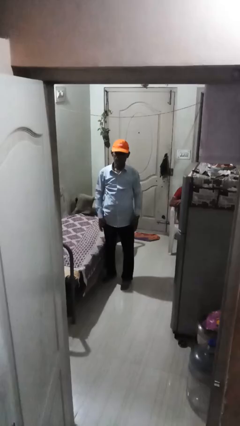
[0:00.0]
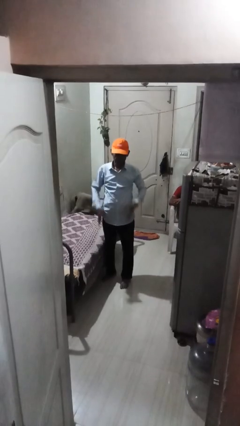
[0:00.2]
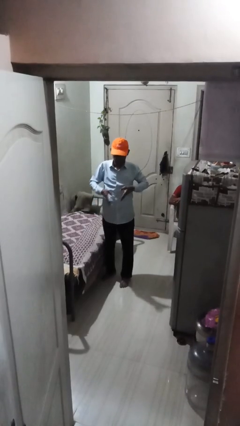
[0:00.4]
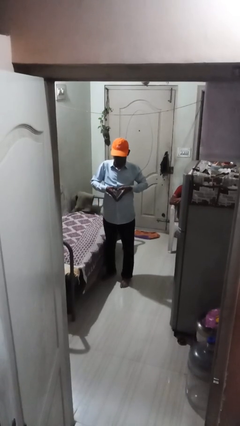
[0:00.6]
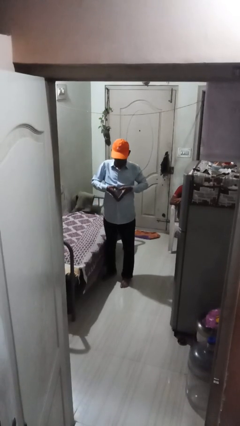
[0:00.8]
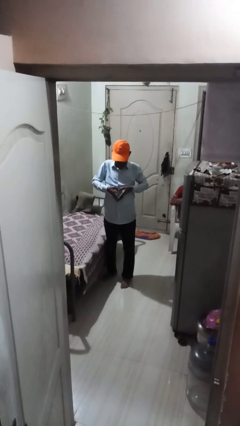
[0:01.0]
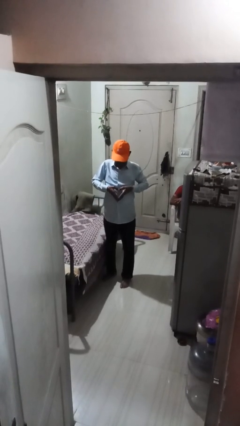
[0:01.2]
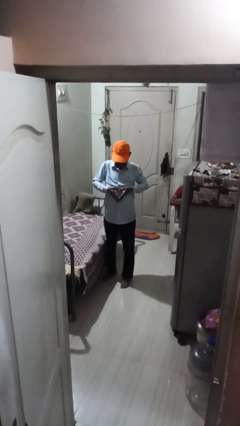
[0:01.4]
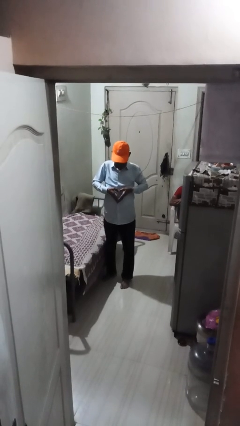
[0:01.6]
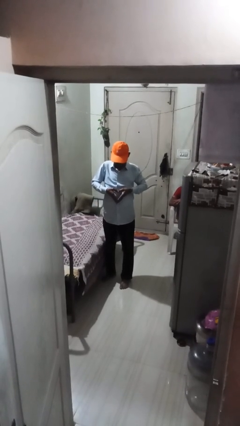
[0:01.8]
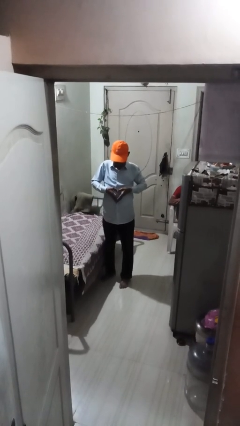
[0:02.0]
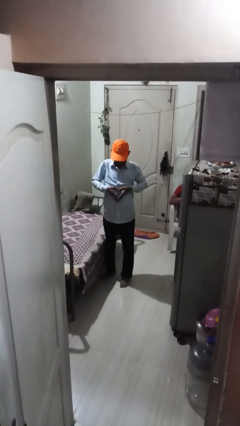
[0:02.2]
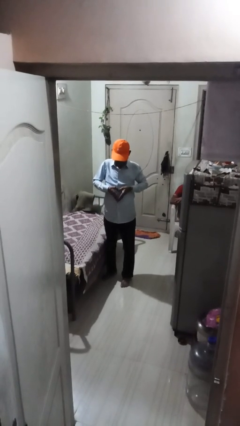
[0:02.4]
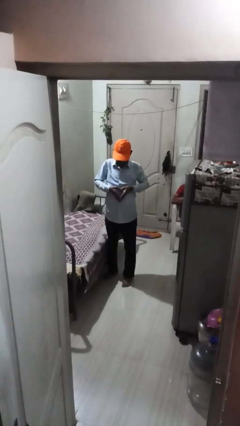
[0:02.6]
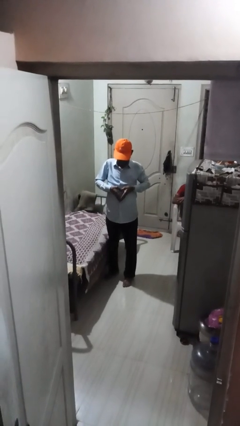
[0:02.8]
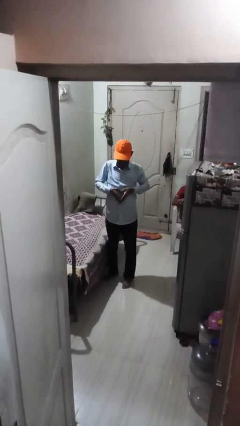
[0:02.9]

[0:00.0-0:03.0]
person gestures heart

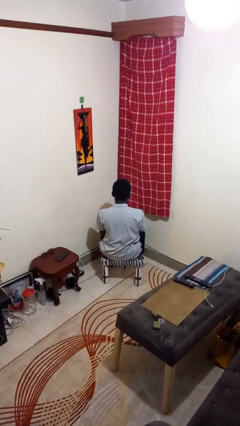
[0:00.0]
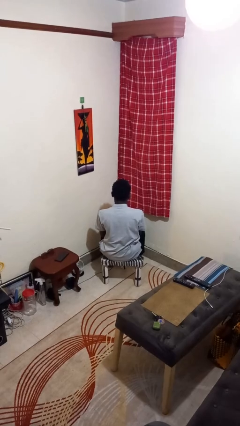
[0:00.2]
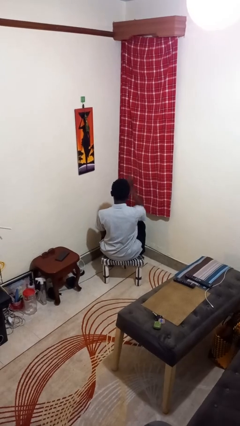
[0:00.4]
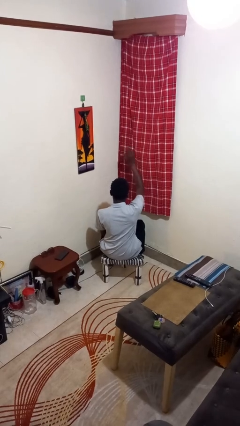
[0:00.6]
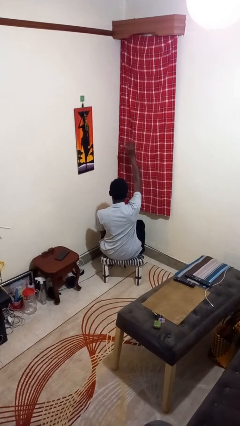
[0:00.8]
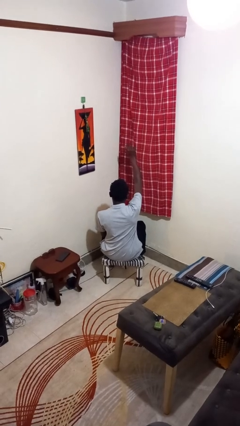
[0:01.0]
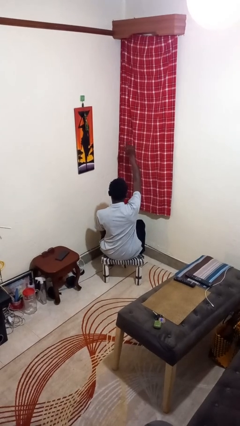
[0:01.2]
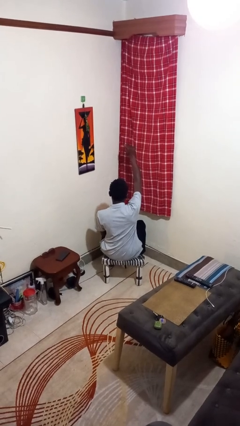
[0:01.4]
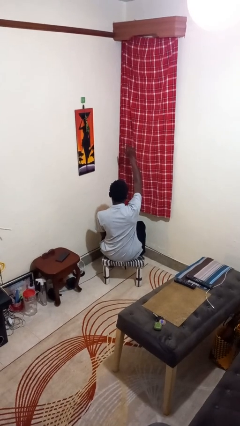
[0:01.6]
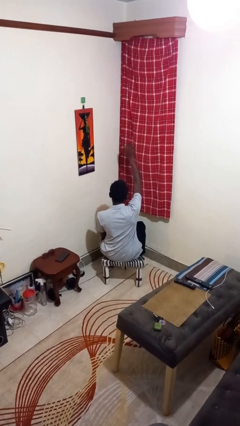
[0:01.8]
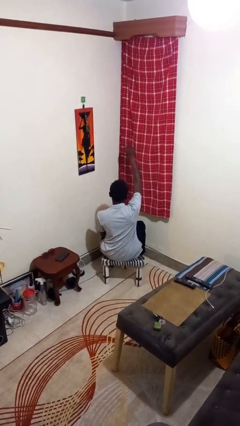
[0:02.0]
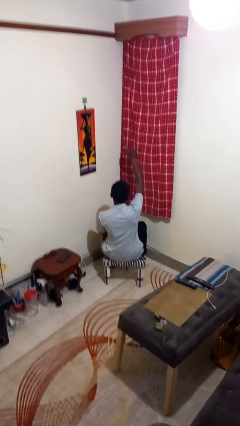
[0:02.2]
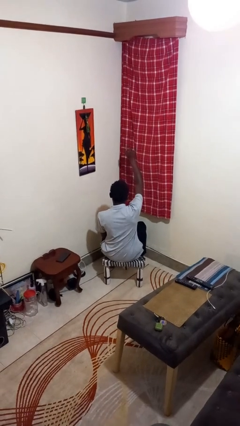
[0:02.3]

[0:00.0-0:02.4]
person gestures come here

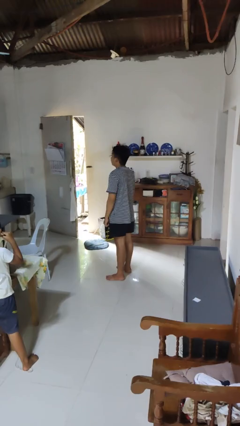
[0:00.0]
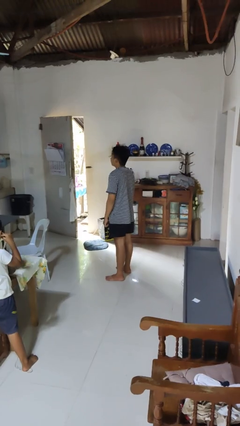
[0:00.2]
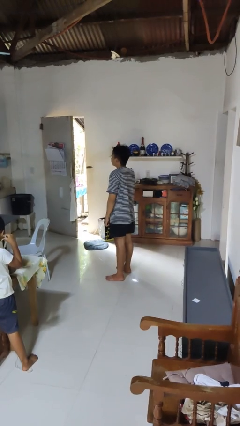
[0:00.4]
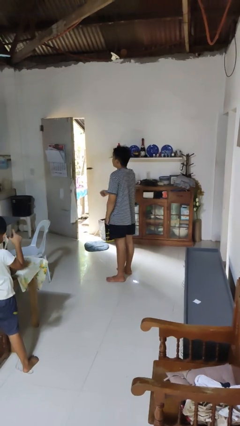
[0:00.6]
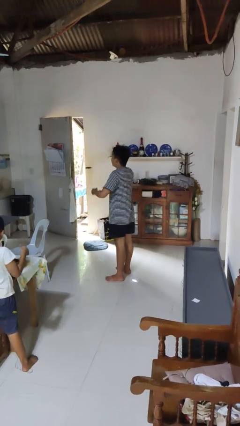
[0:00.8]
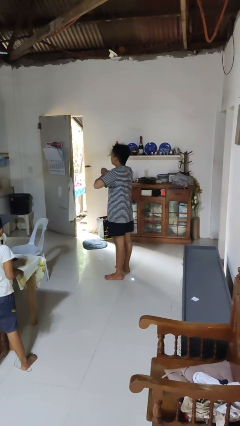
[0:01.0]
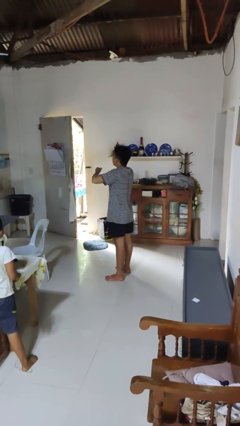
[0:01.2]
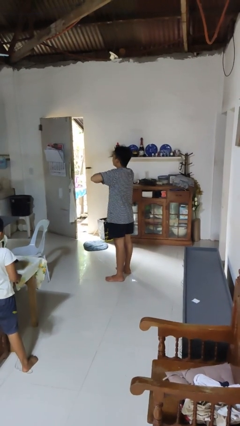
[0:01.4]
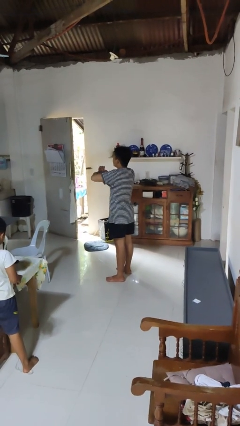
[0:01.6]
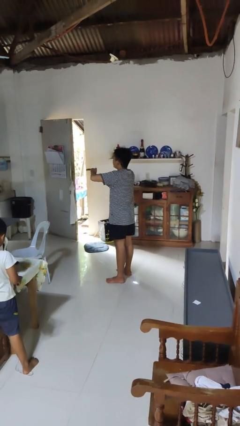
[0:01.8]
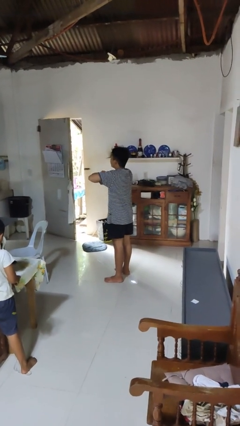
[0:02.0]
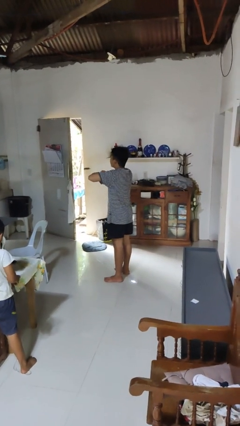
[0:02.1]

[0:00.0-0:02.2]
person drums on chest

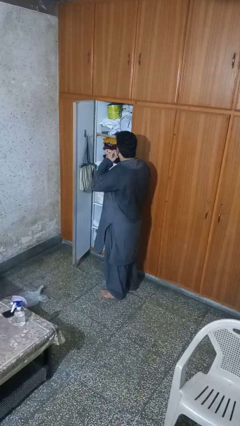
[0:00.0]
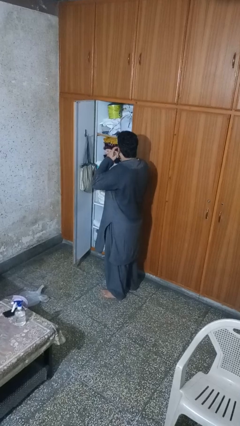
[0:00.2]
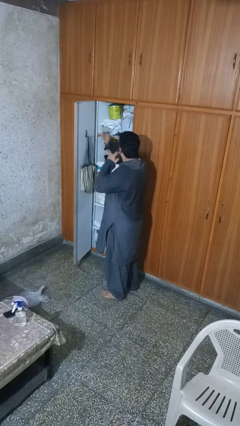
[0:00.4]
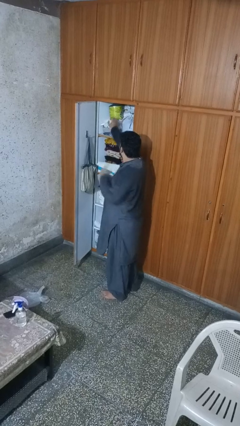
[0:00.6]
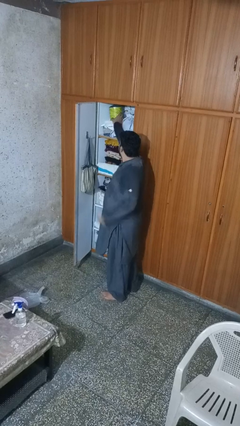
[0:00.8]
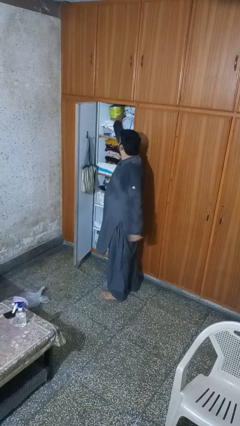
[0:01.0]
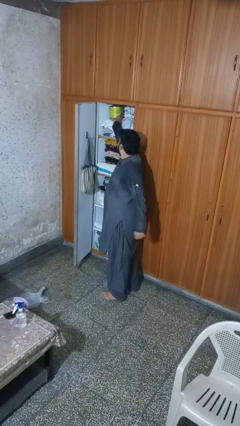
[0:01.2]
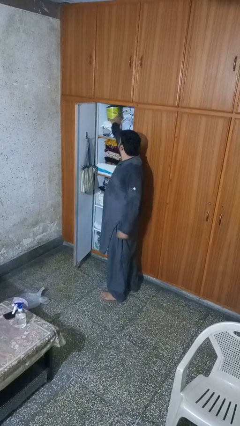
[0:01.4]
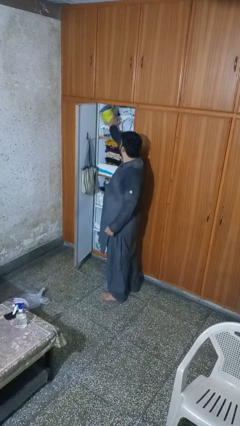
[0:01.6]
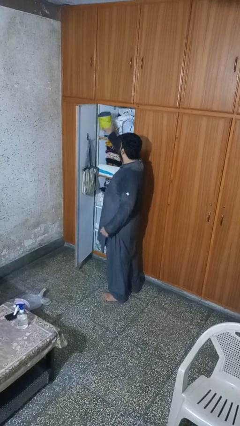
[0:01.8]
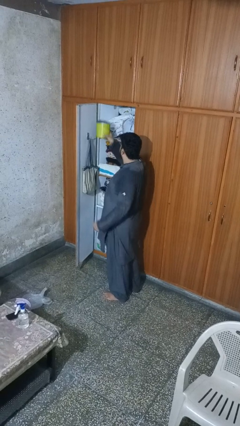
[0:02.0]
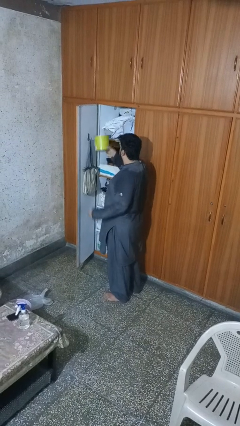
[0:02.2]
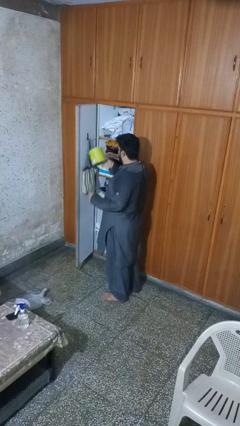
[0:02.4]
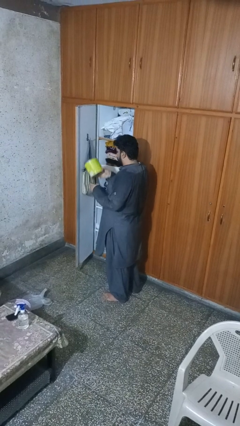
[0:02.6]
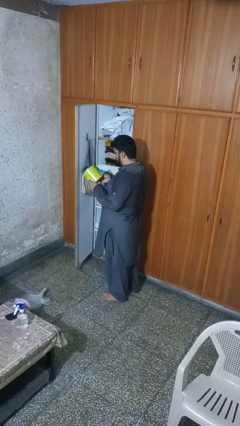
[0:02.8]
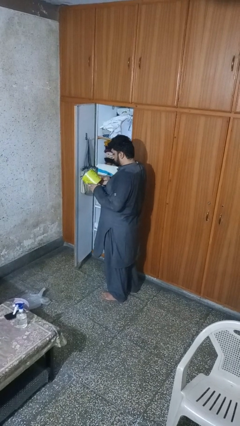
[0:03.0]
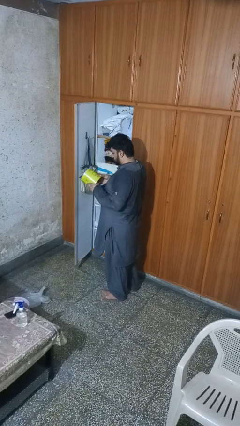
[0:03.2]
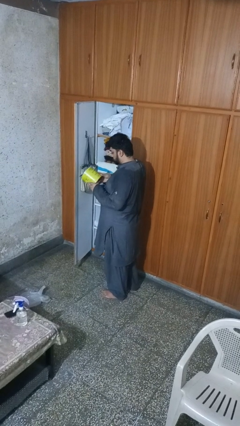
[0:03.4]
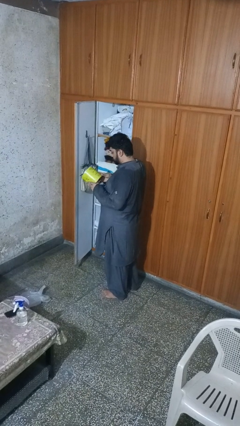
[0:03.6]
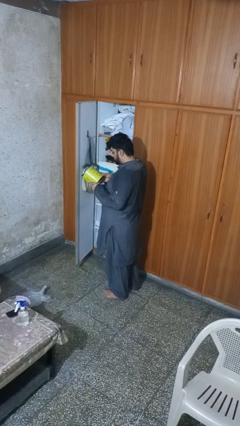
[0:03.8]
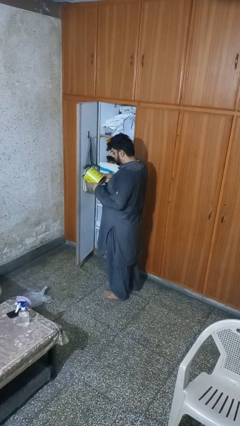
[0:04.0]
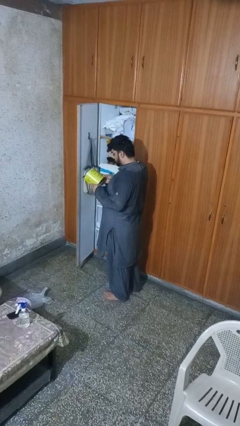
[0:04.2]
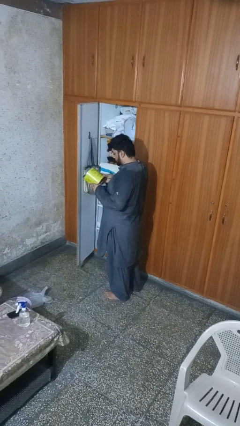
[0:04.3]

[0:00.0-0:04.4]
person picks up object from shelf

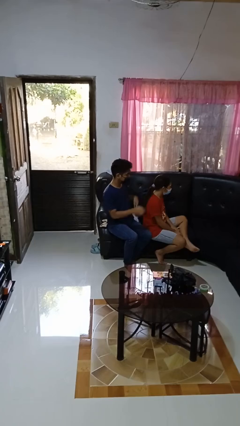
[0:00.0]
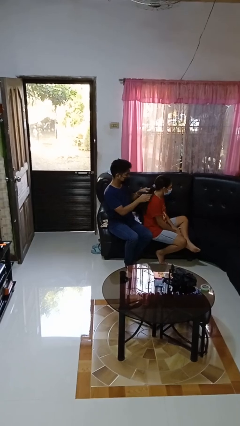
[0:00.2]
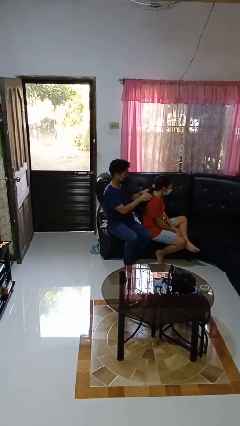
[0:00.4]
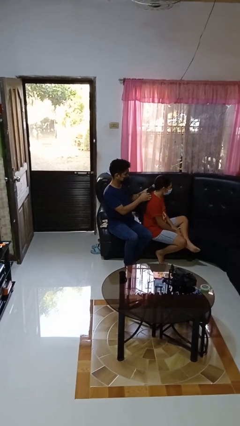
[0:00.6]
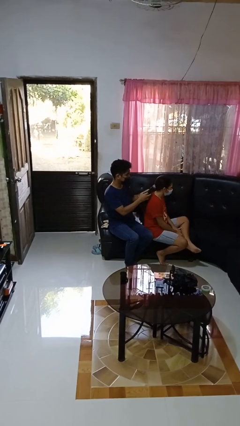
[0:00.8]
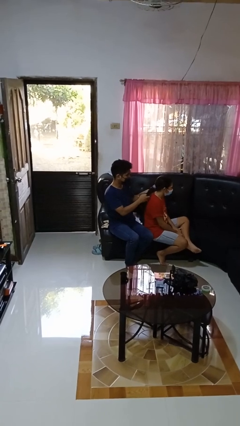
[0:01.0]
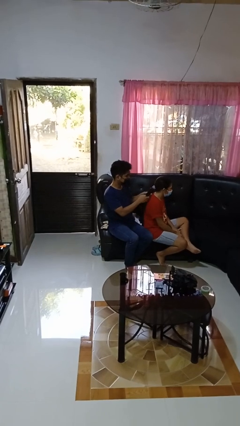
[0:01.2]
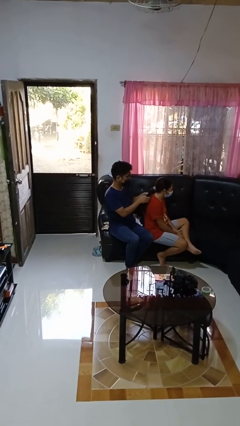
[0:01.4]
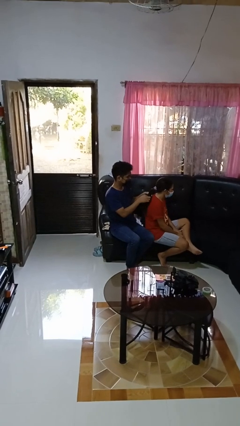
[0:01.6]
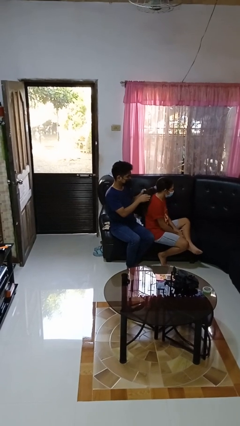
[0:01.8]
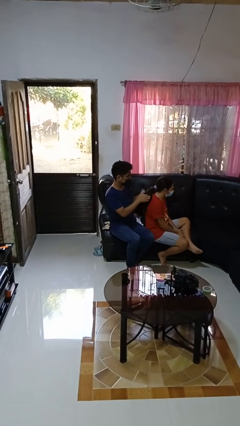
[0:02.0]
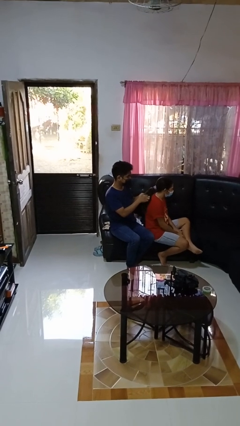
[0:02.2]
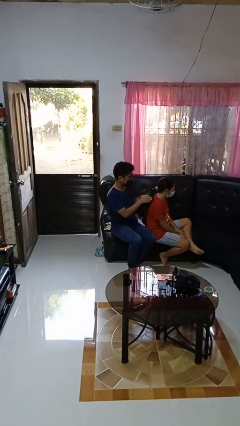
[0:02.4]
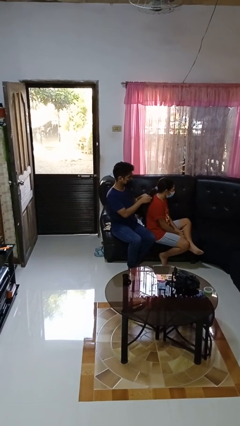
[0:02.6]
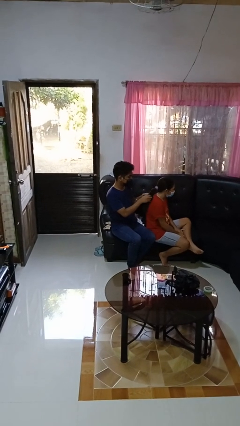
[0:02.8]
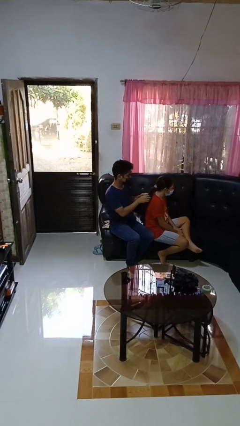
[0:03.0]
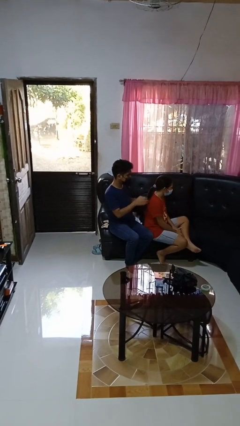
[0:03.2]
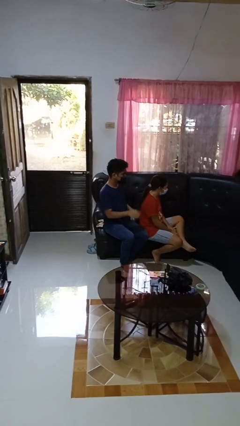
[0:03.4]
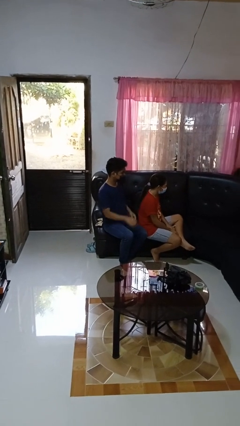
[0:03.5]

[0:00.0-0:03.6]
person braids hair of person

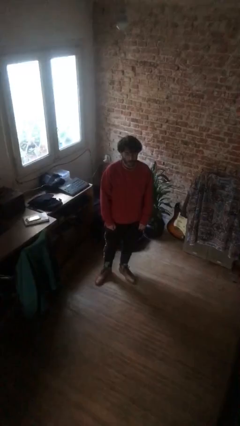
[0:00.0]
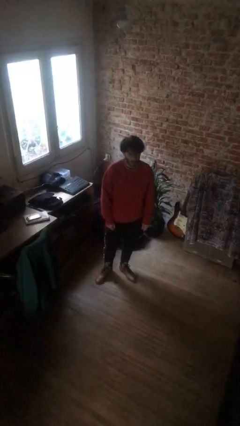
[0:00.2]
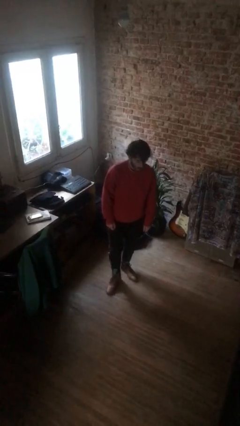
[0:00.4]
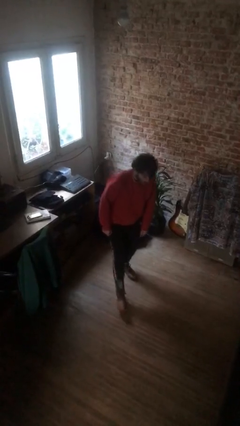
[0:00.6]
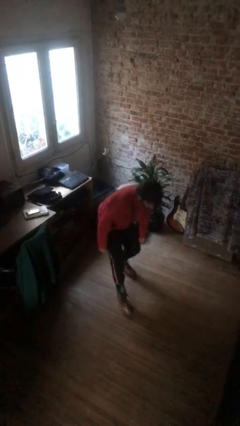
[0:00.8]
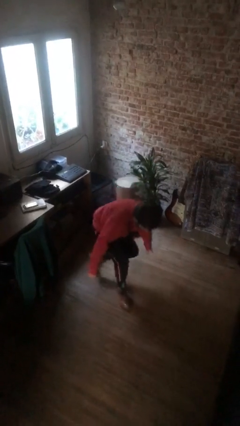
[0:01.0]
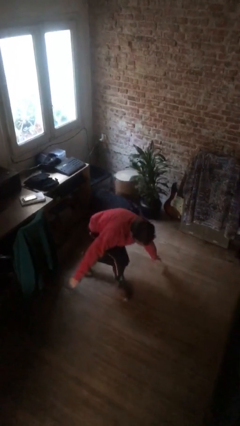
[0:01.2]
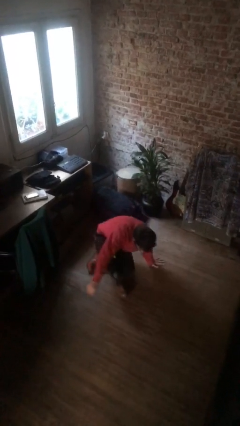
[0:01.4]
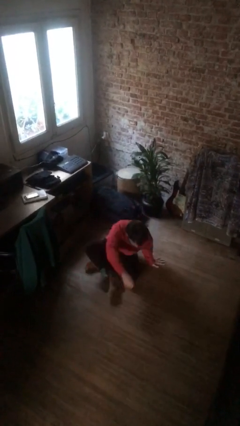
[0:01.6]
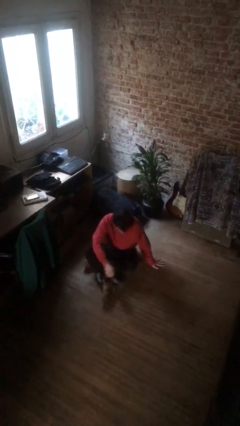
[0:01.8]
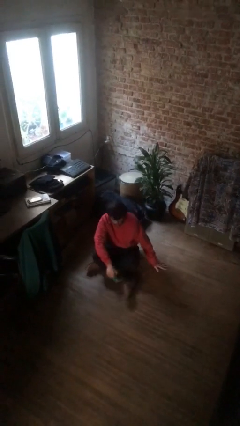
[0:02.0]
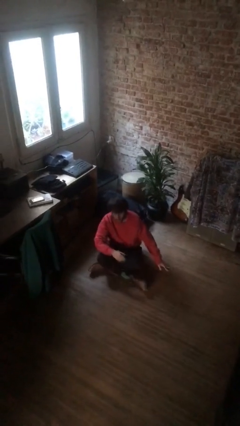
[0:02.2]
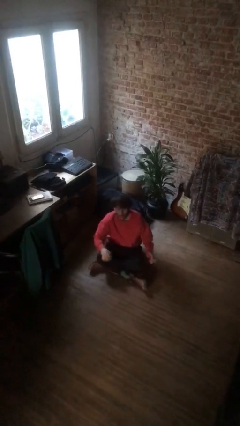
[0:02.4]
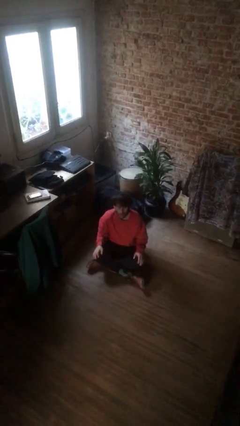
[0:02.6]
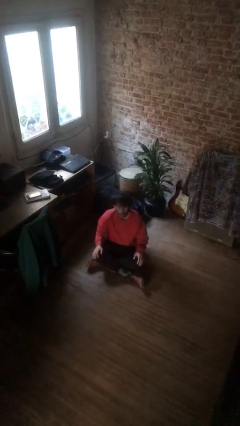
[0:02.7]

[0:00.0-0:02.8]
person sits crisscross
